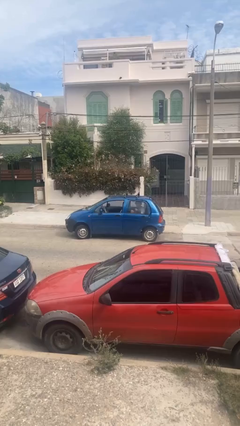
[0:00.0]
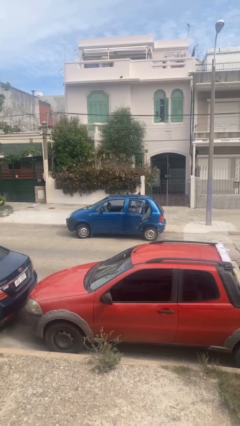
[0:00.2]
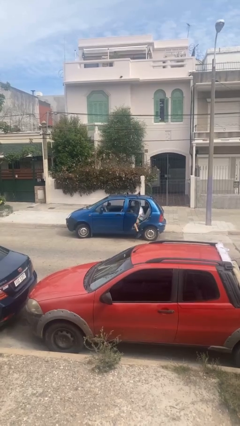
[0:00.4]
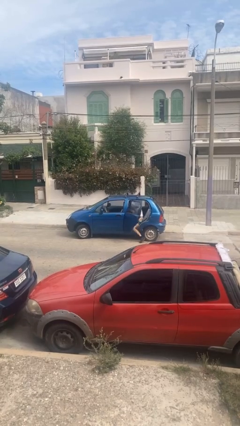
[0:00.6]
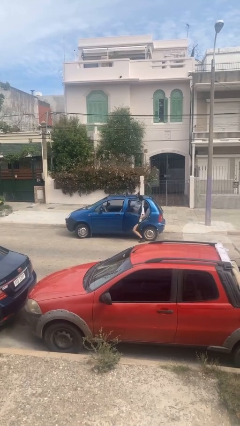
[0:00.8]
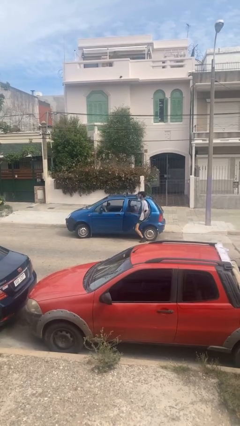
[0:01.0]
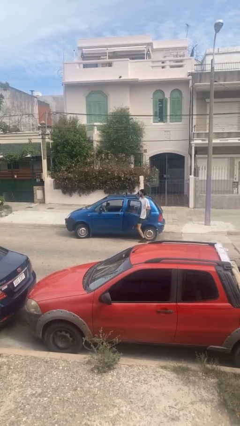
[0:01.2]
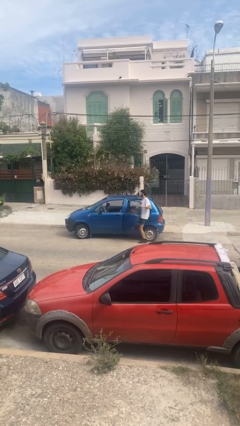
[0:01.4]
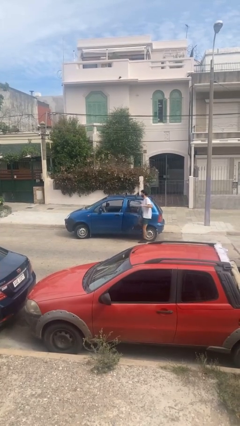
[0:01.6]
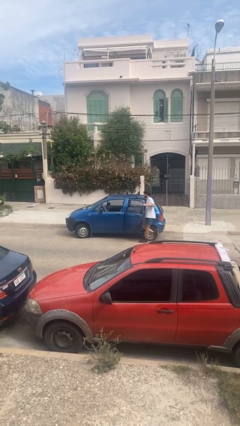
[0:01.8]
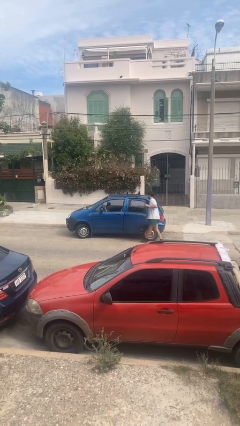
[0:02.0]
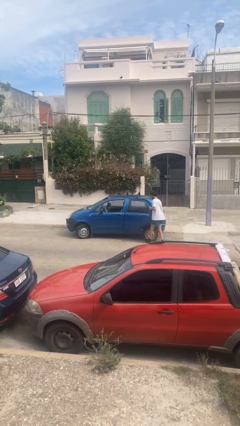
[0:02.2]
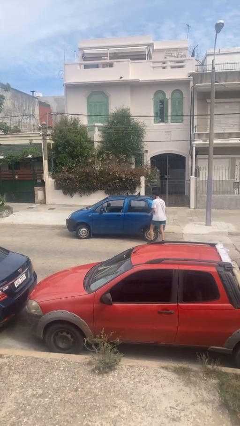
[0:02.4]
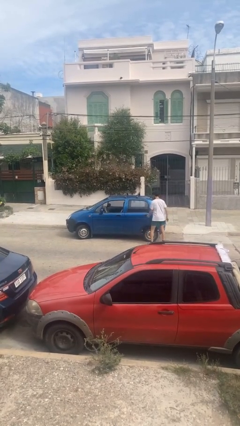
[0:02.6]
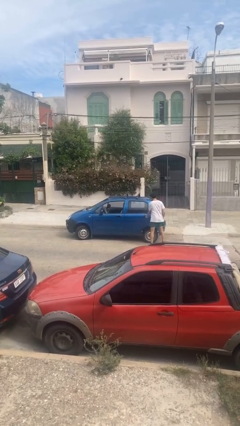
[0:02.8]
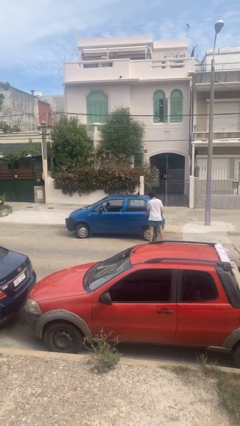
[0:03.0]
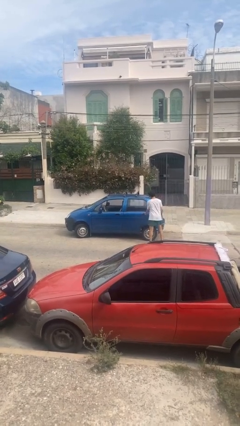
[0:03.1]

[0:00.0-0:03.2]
car drops off person

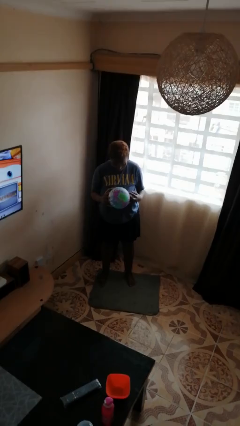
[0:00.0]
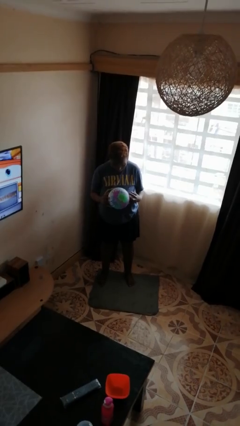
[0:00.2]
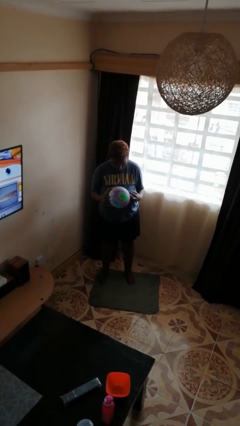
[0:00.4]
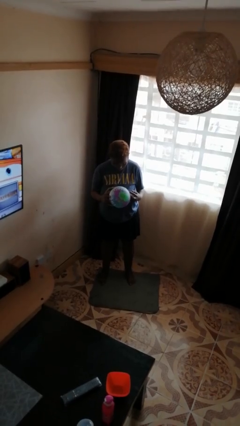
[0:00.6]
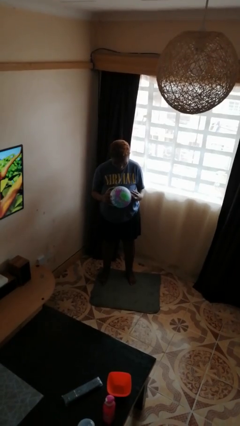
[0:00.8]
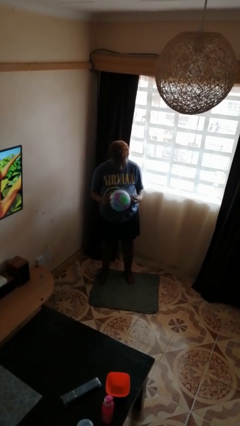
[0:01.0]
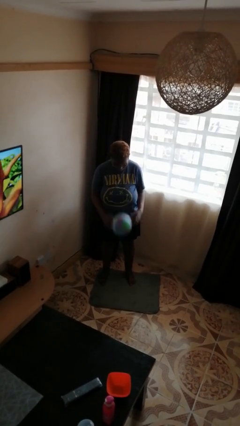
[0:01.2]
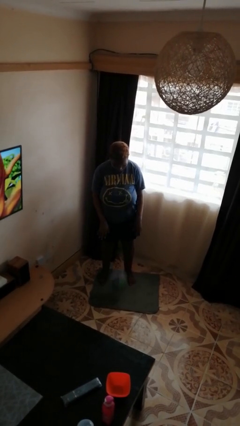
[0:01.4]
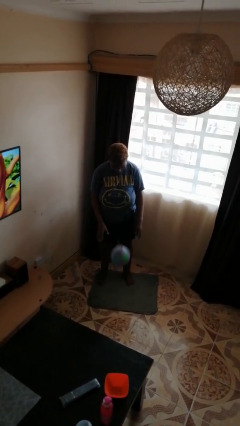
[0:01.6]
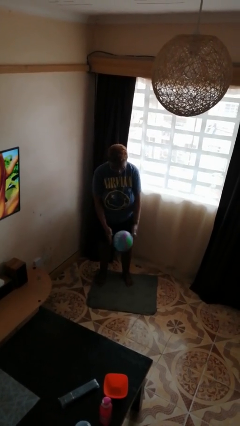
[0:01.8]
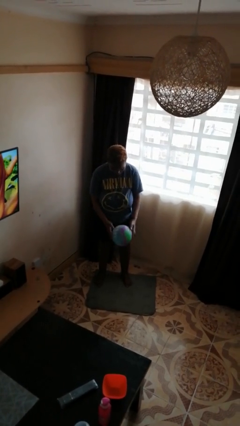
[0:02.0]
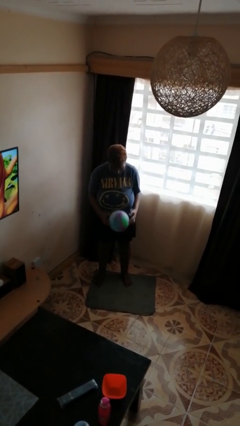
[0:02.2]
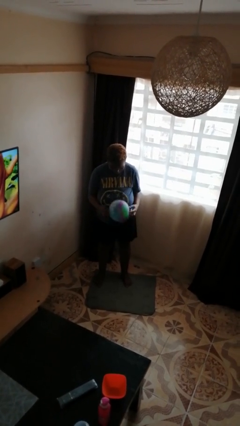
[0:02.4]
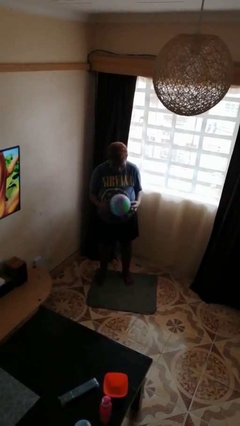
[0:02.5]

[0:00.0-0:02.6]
person bounces ball on floor

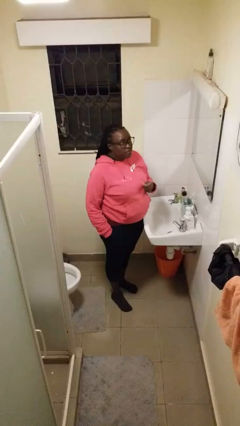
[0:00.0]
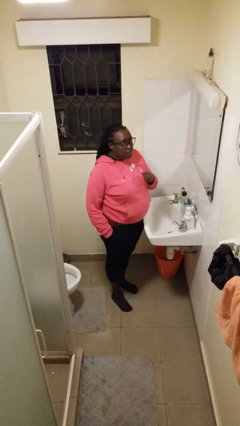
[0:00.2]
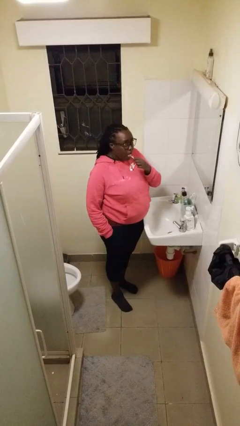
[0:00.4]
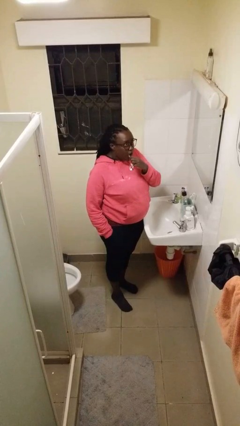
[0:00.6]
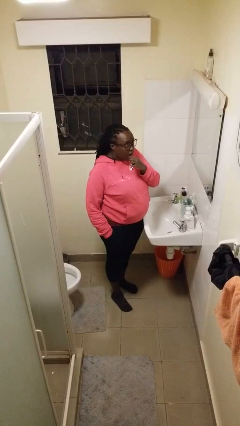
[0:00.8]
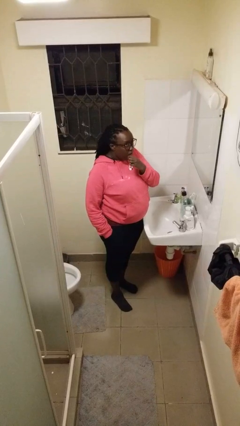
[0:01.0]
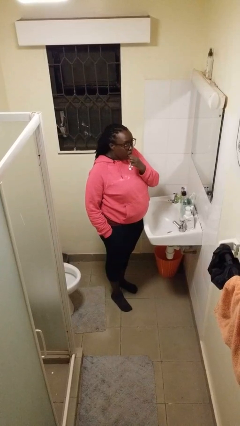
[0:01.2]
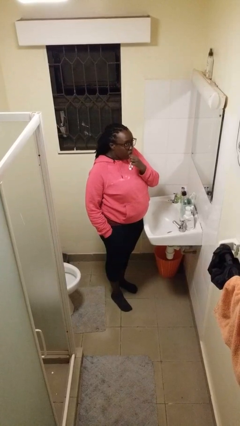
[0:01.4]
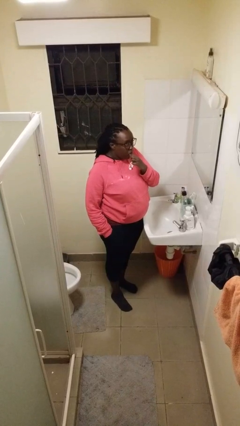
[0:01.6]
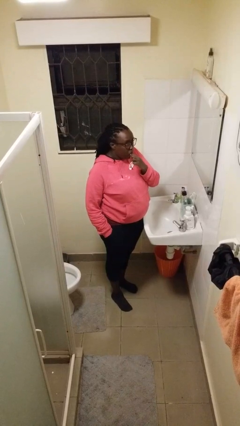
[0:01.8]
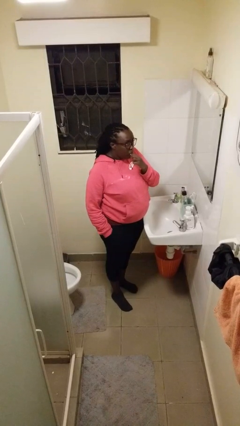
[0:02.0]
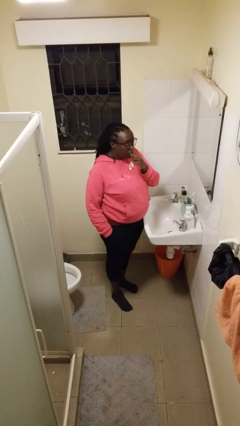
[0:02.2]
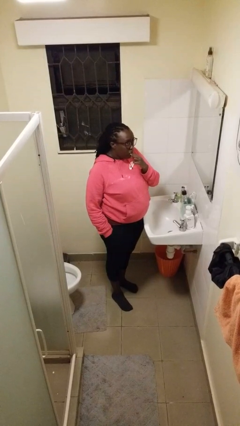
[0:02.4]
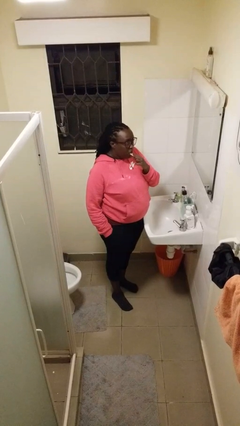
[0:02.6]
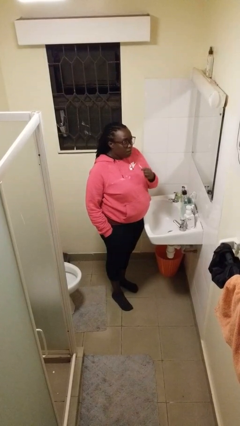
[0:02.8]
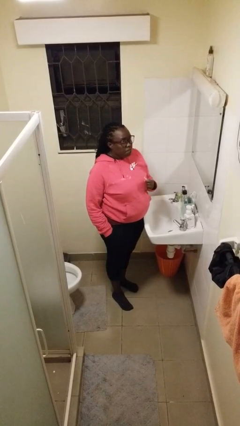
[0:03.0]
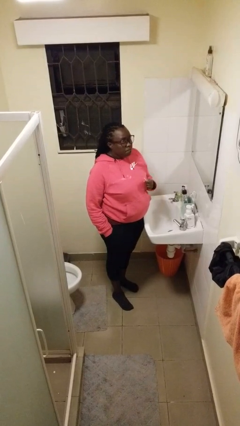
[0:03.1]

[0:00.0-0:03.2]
person flosses

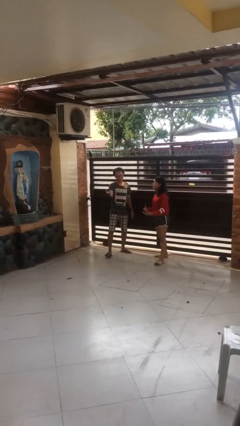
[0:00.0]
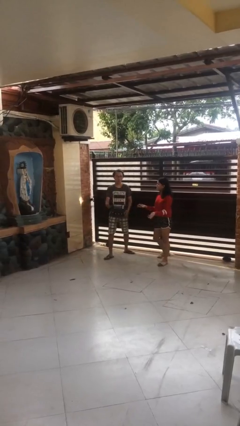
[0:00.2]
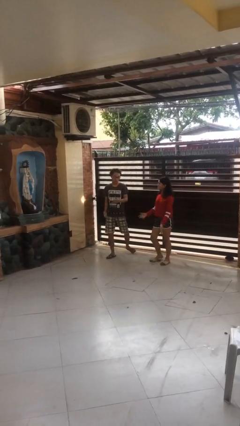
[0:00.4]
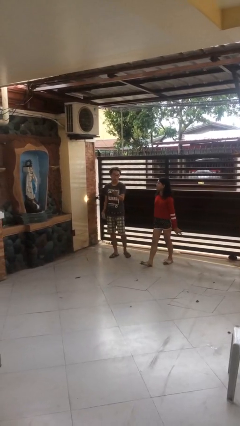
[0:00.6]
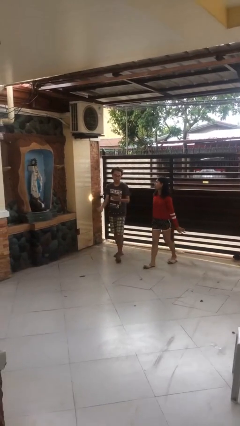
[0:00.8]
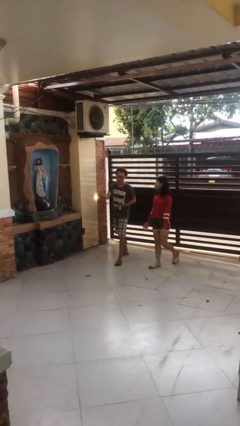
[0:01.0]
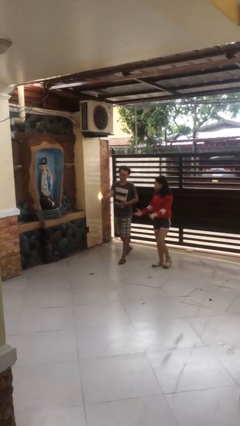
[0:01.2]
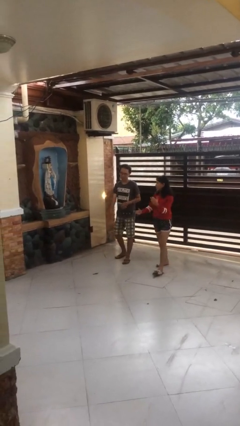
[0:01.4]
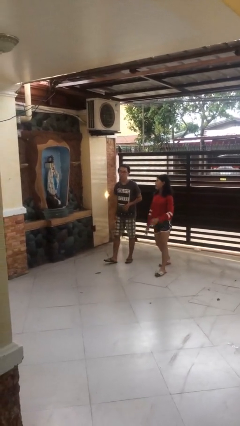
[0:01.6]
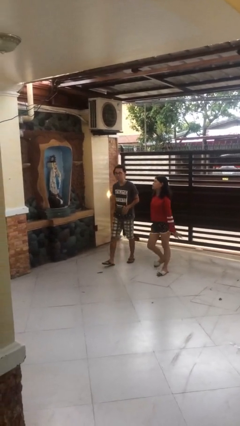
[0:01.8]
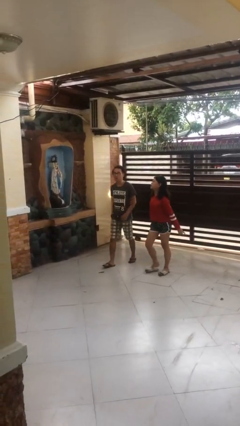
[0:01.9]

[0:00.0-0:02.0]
person talks to person

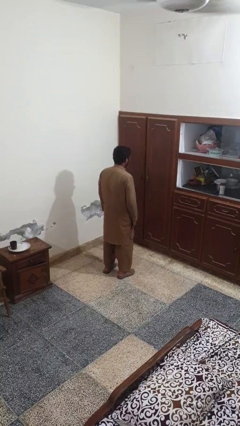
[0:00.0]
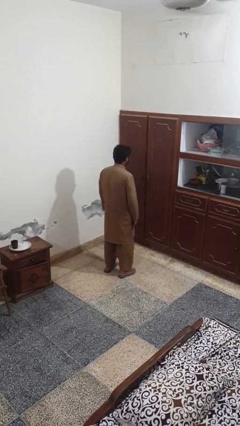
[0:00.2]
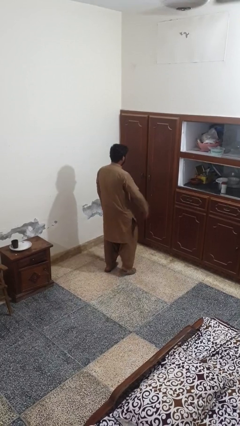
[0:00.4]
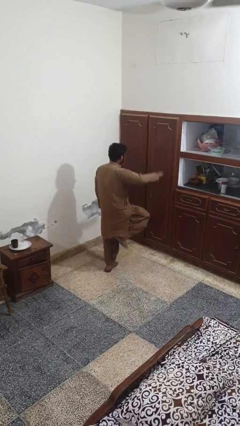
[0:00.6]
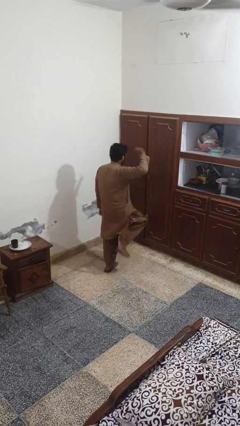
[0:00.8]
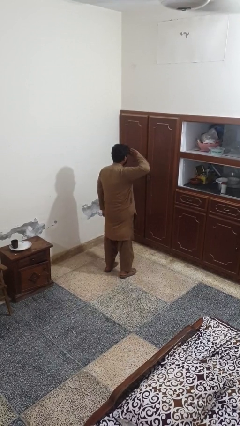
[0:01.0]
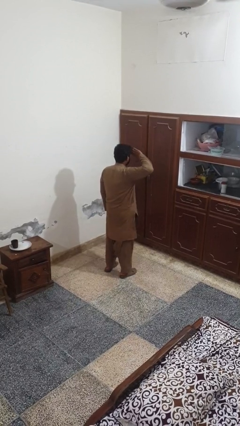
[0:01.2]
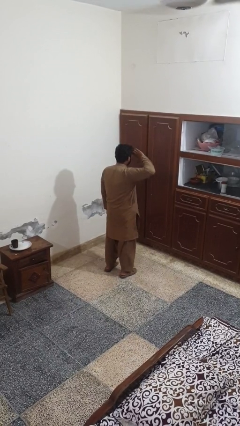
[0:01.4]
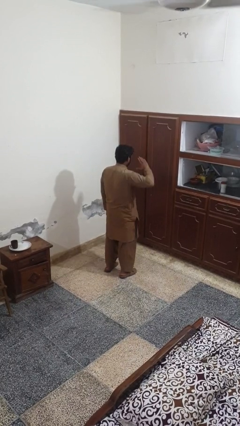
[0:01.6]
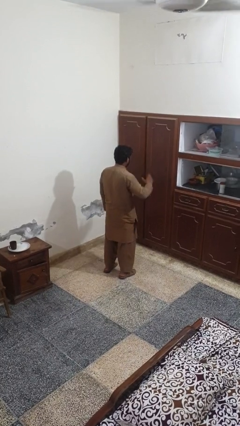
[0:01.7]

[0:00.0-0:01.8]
person salutes

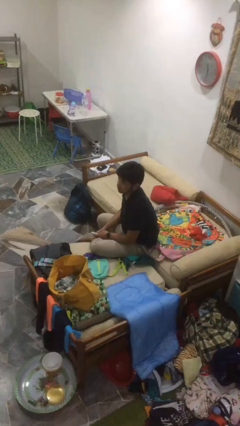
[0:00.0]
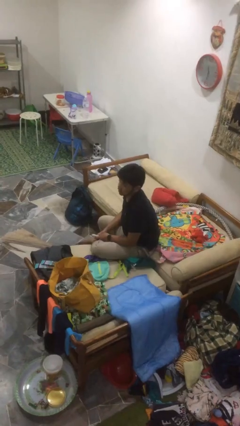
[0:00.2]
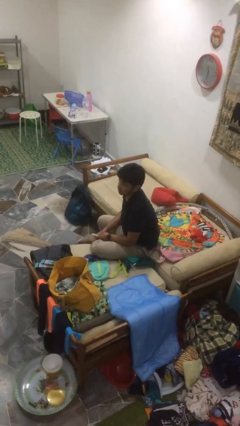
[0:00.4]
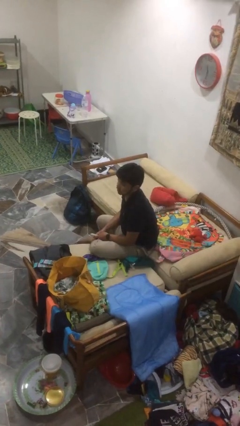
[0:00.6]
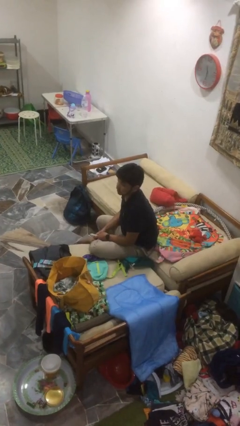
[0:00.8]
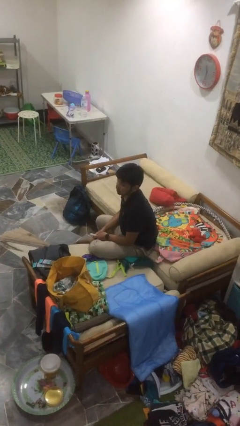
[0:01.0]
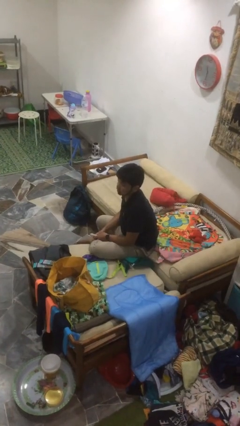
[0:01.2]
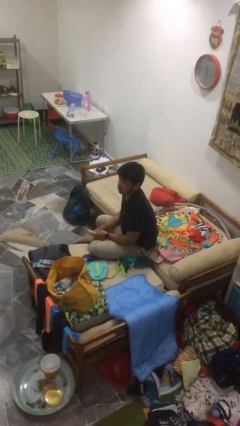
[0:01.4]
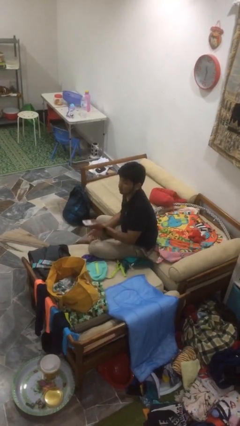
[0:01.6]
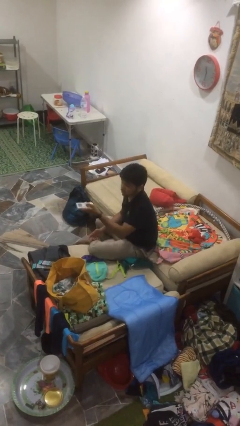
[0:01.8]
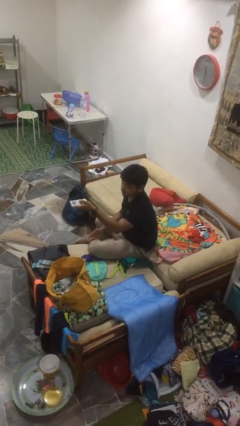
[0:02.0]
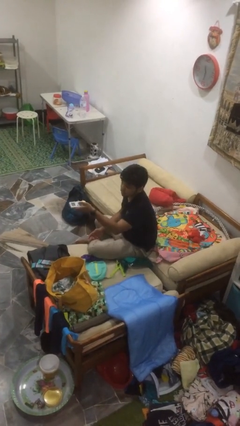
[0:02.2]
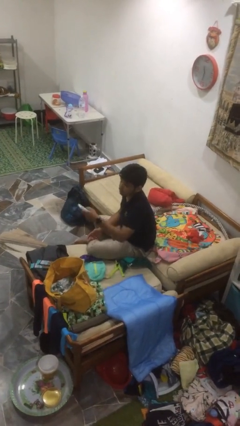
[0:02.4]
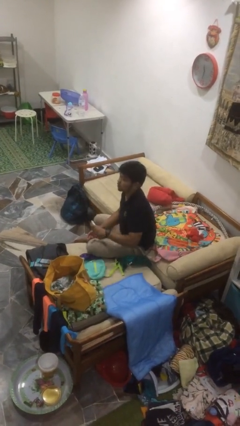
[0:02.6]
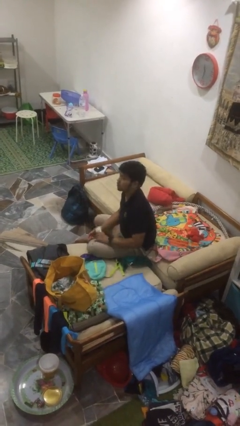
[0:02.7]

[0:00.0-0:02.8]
person uses television remote

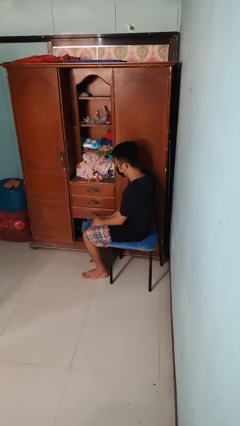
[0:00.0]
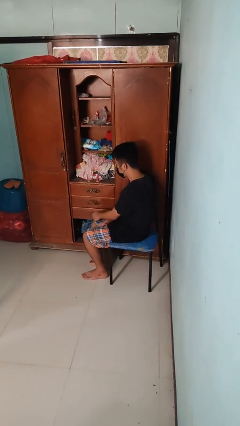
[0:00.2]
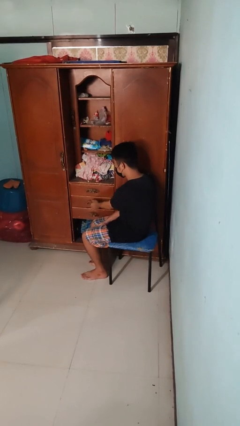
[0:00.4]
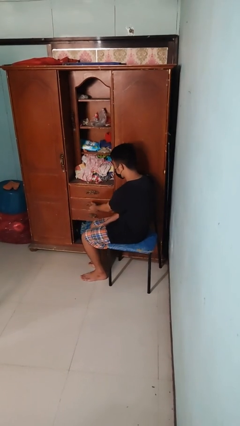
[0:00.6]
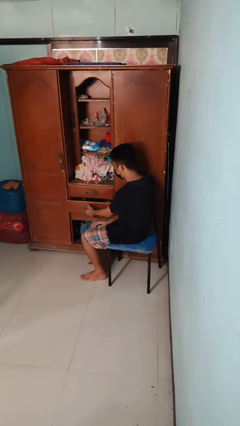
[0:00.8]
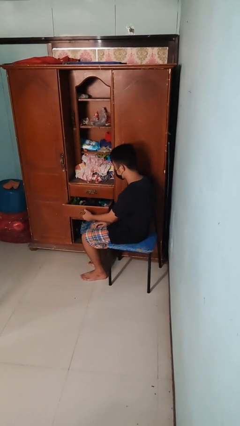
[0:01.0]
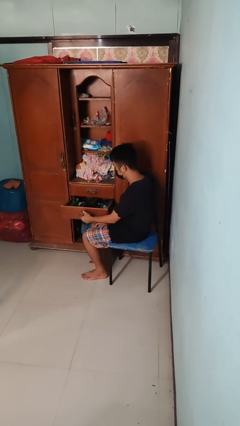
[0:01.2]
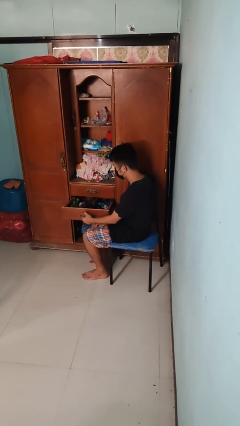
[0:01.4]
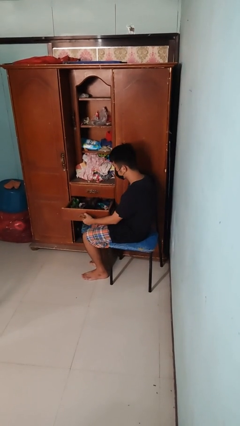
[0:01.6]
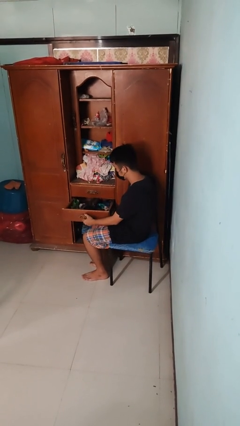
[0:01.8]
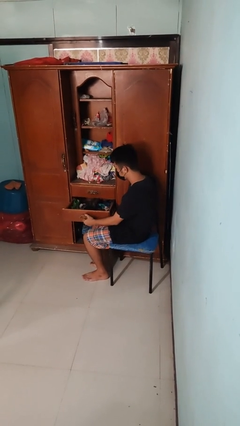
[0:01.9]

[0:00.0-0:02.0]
person opens dresser drawer
